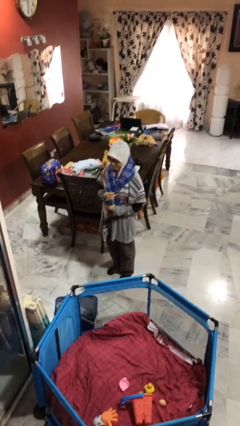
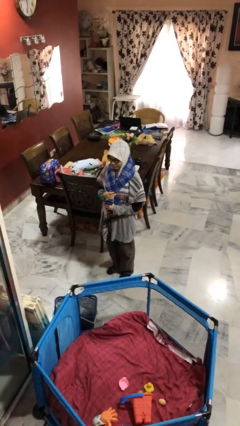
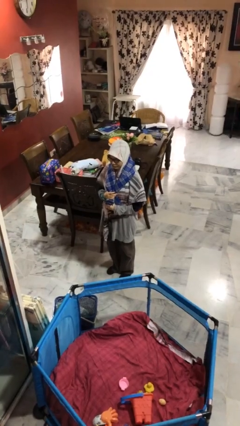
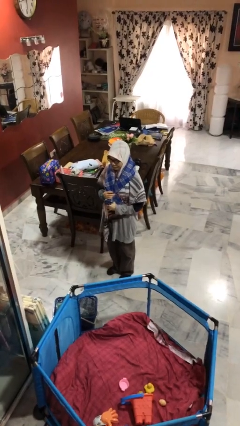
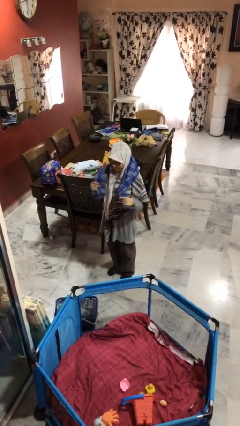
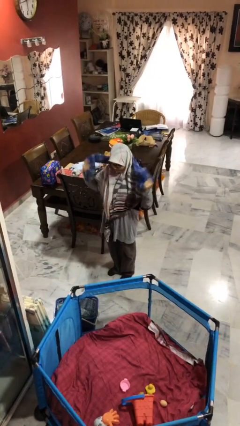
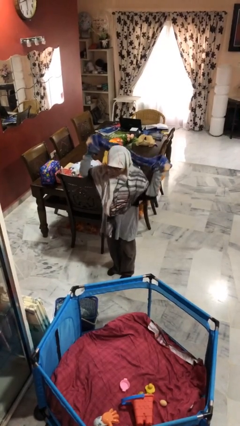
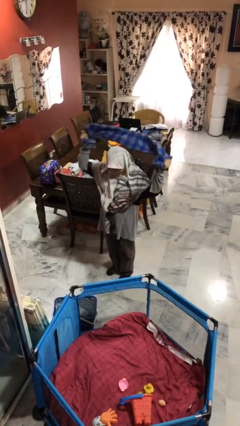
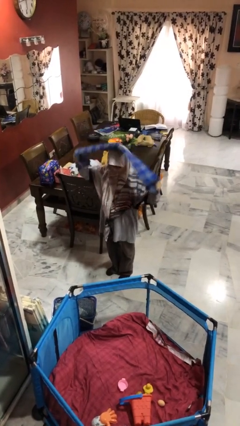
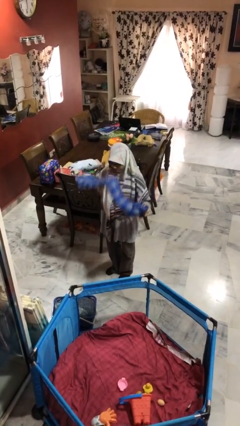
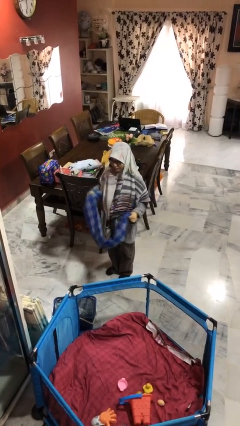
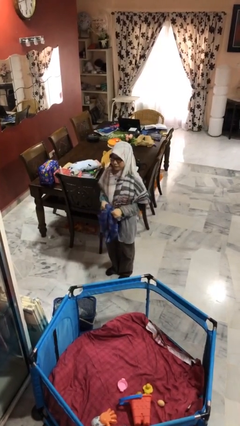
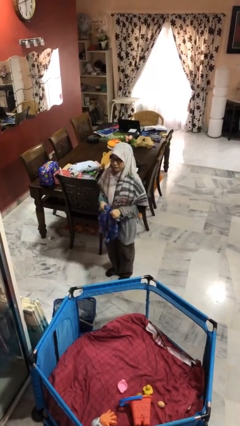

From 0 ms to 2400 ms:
person takes off scarf

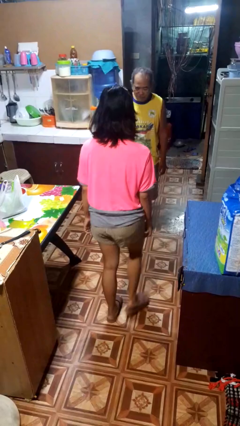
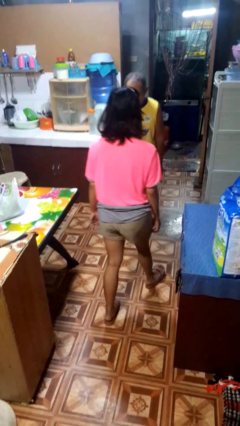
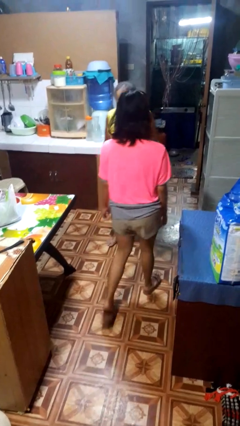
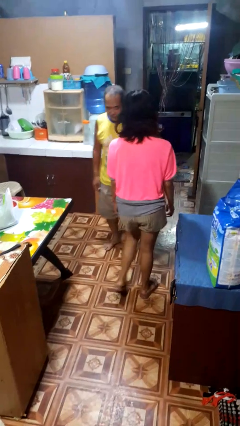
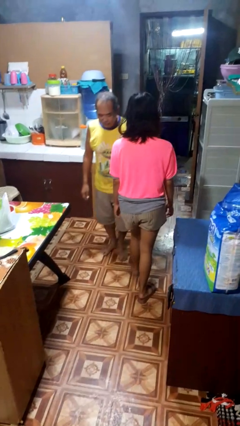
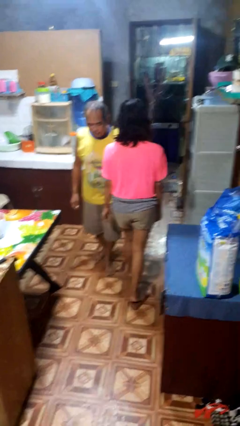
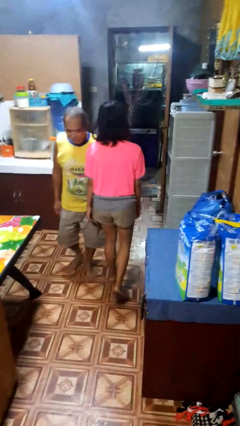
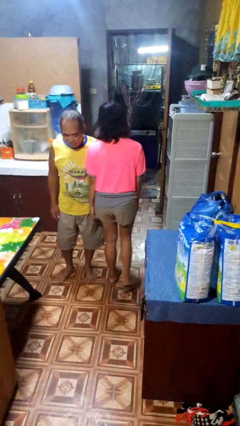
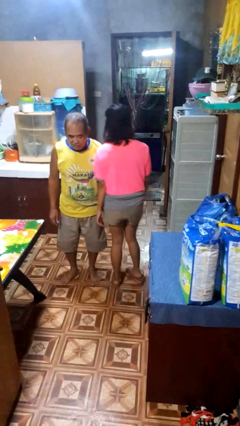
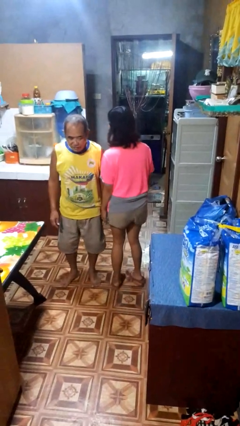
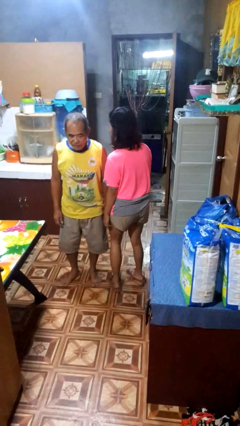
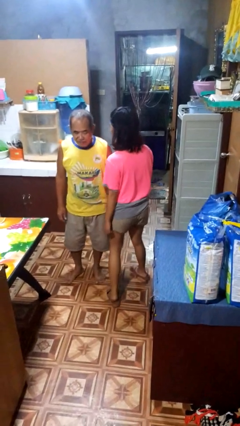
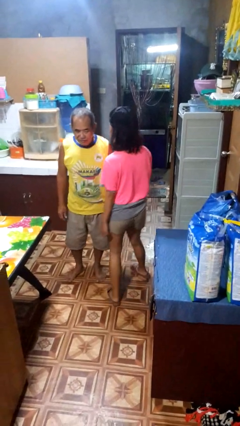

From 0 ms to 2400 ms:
person bumps into person

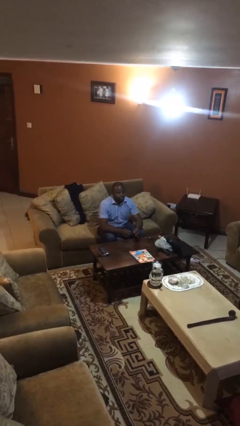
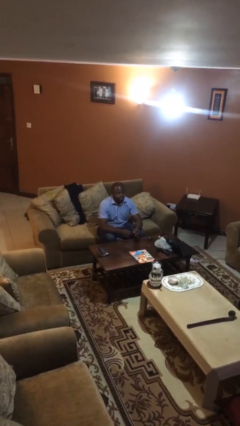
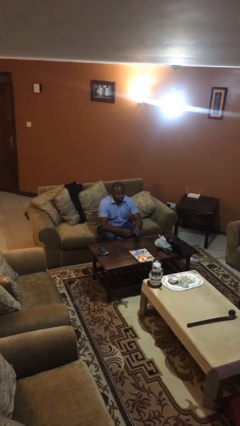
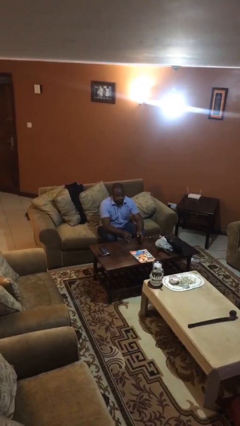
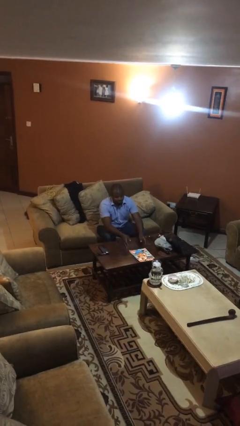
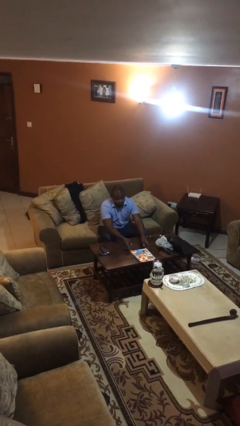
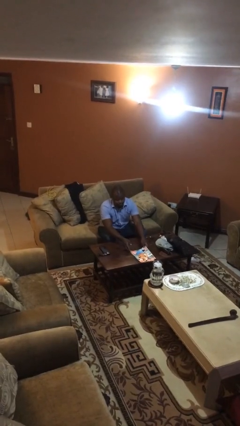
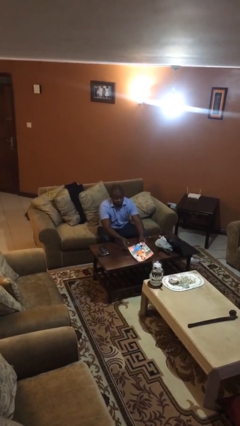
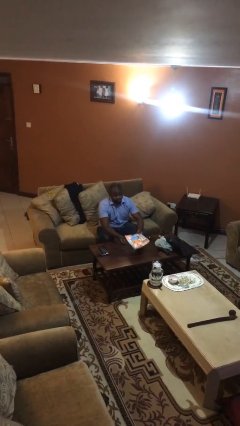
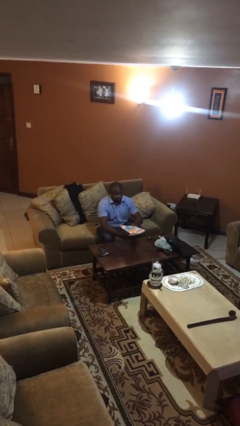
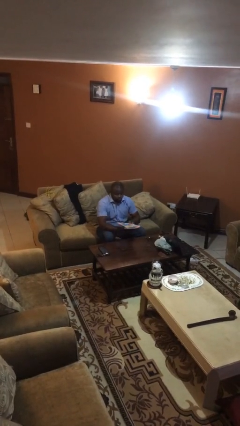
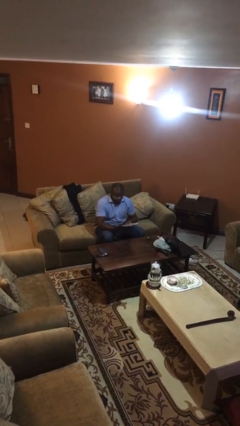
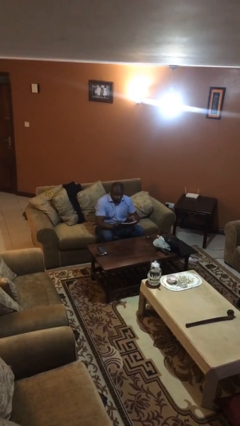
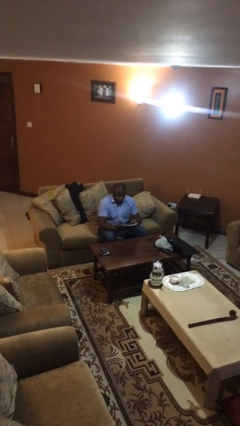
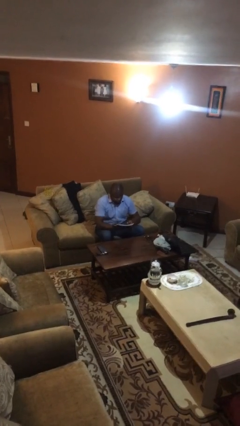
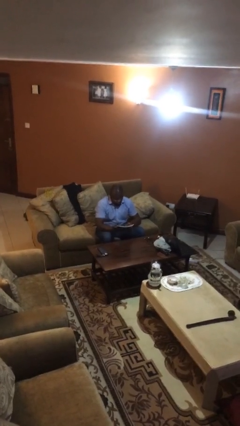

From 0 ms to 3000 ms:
person picks up object from table

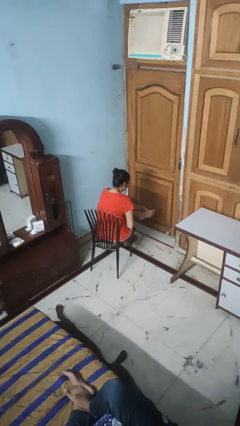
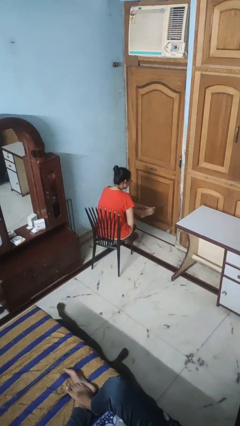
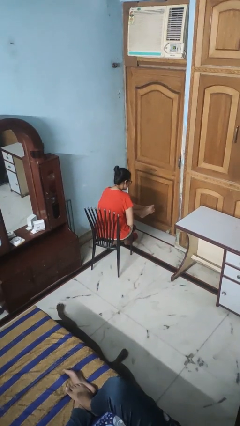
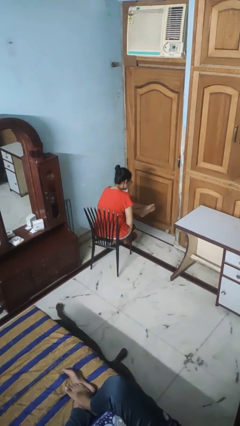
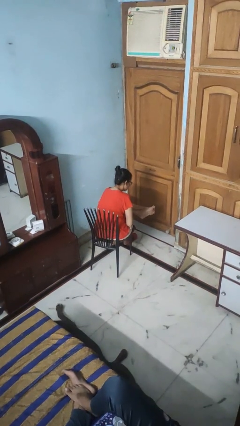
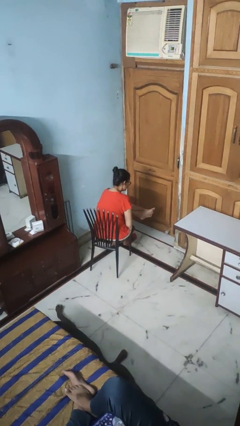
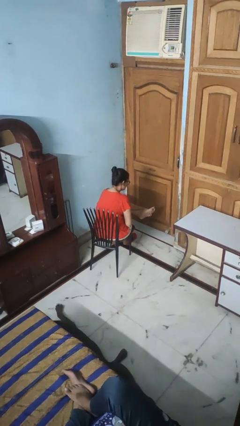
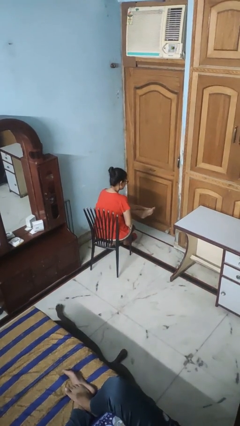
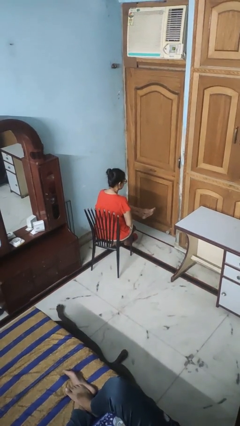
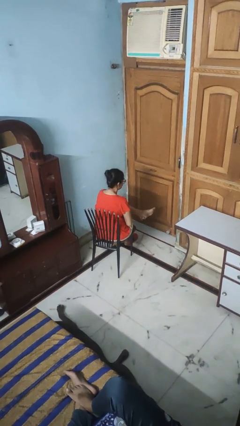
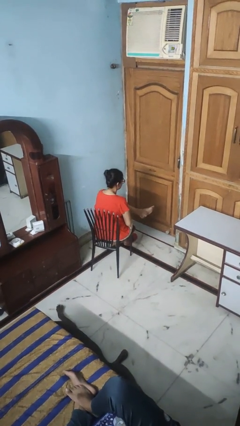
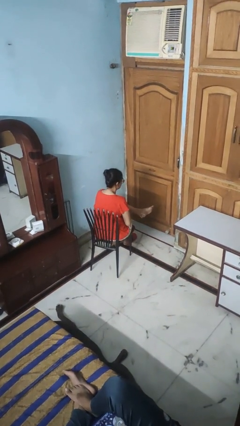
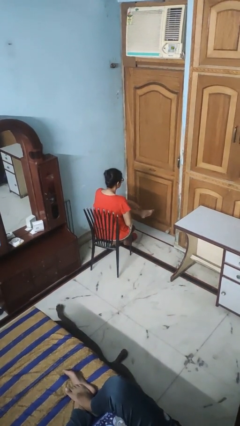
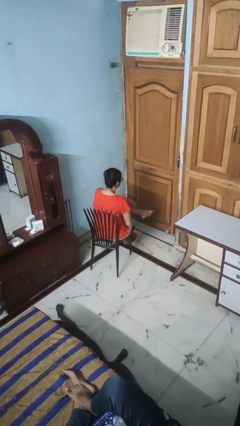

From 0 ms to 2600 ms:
person rubs foot

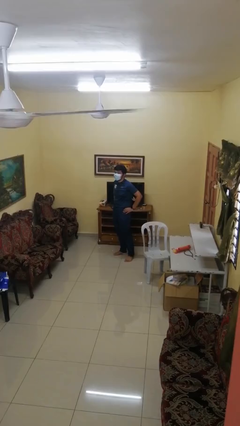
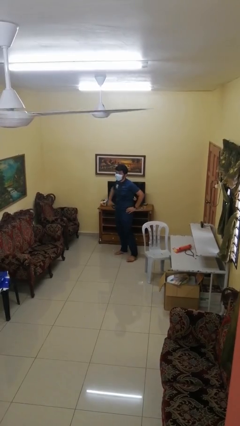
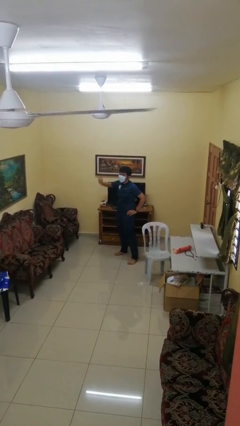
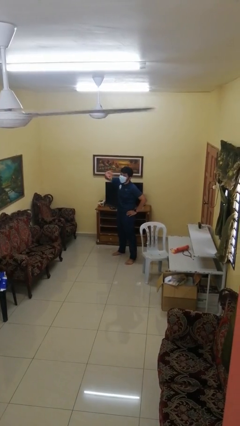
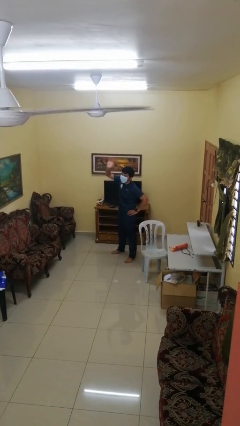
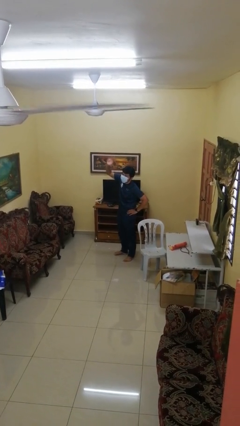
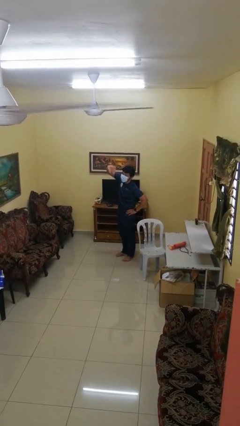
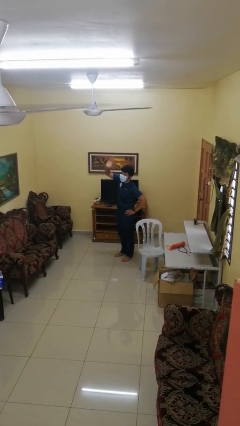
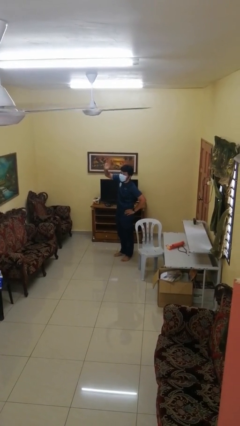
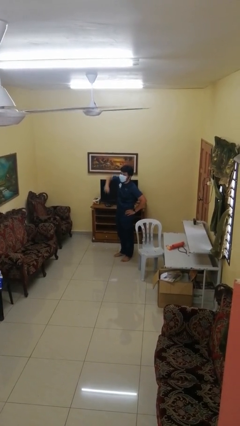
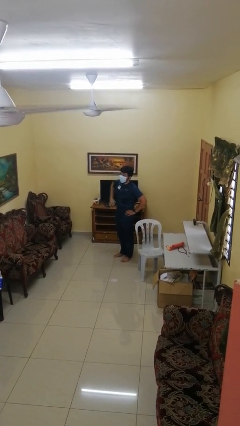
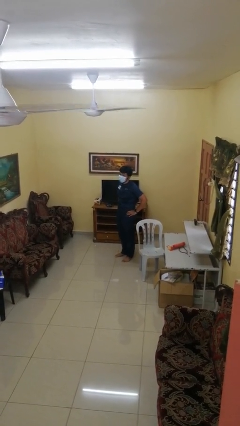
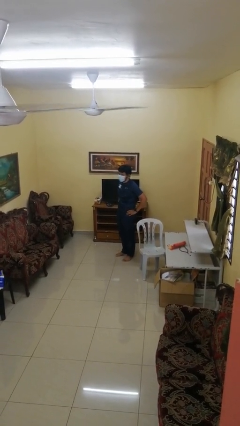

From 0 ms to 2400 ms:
person waves at person

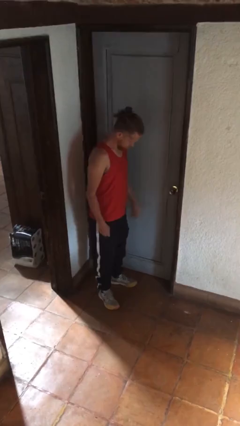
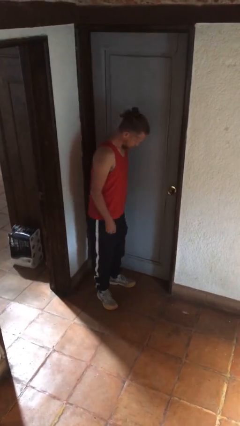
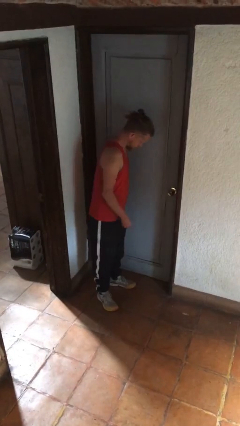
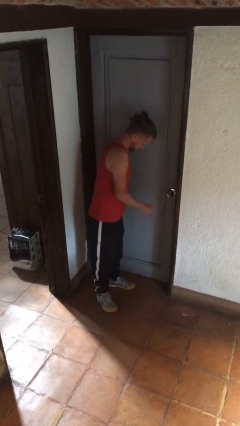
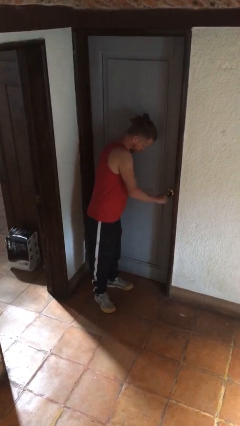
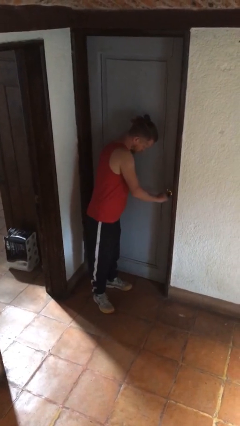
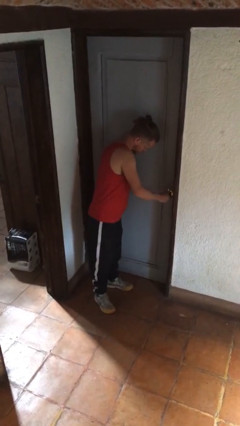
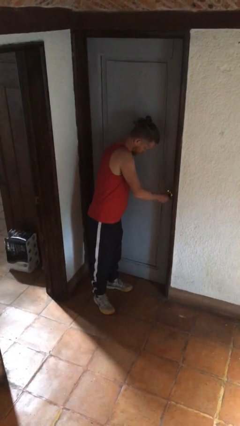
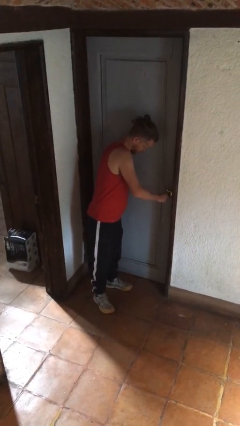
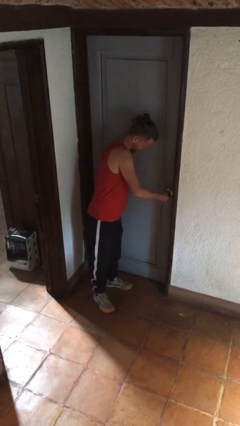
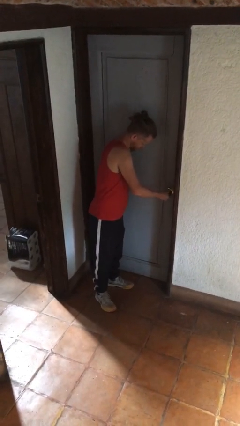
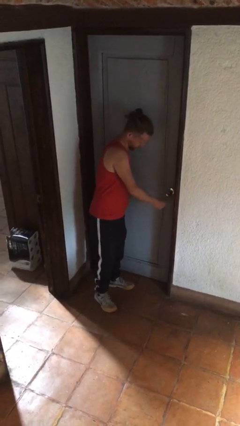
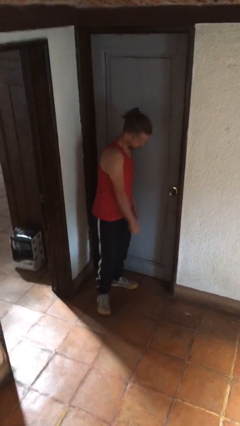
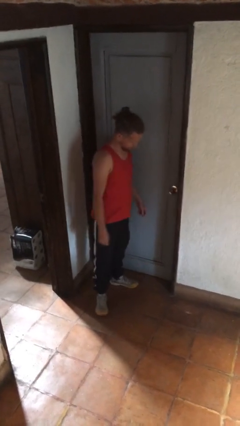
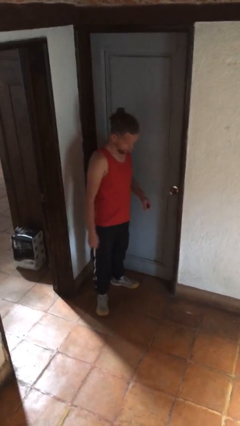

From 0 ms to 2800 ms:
person locks door with keys

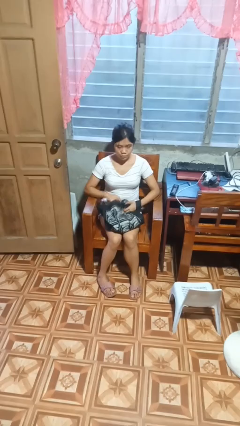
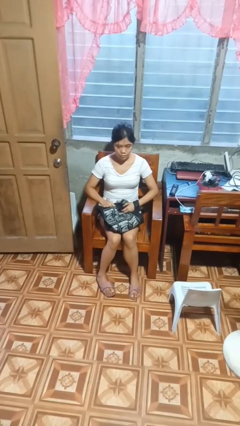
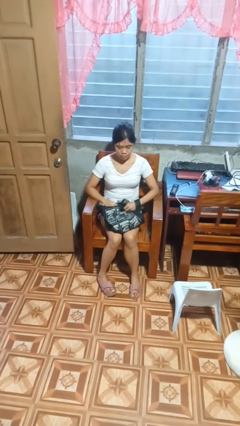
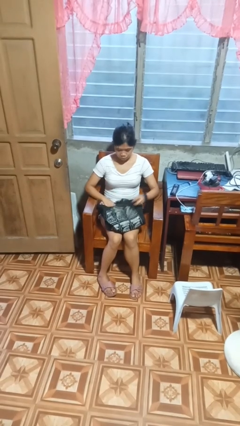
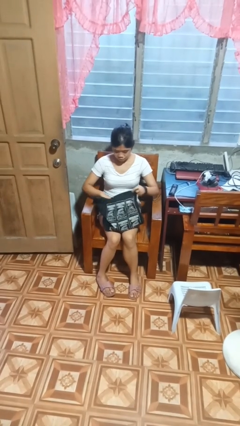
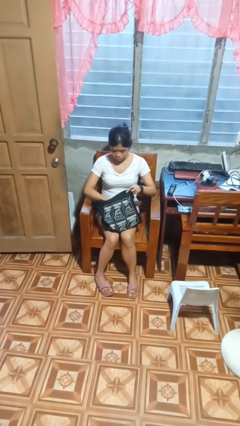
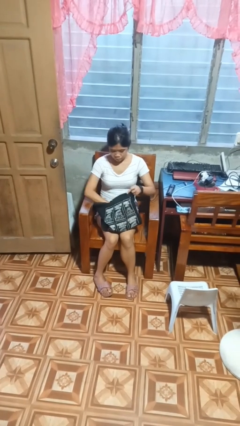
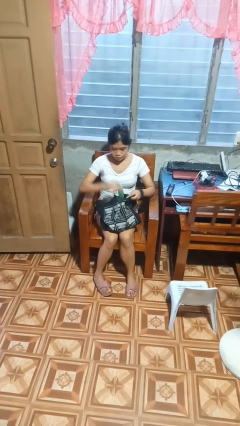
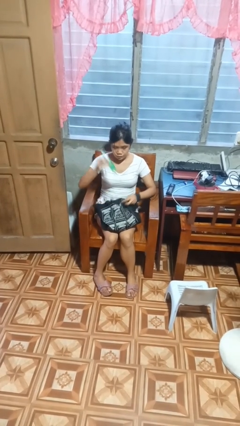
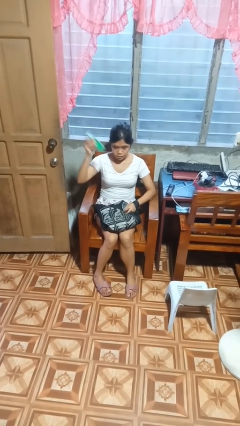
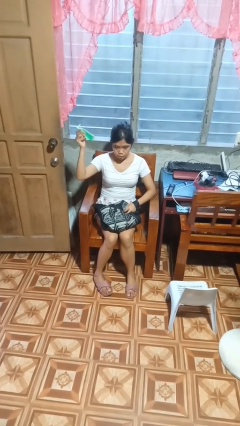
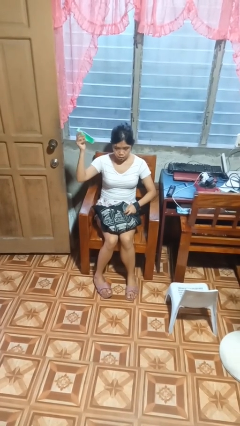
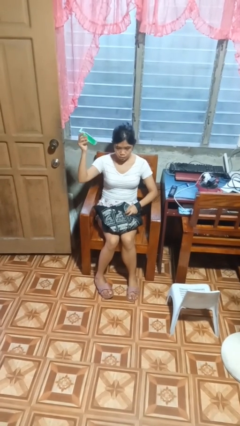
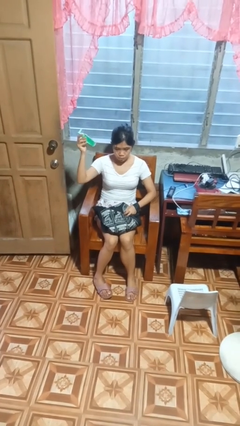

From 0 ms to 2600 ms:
person searches in bag
